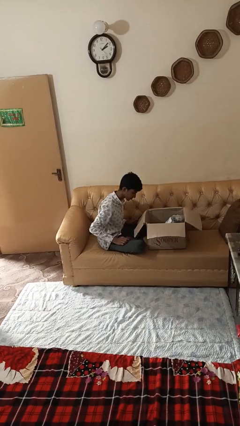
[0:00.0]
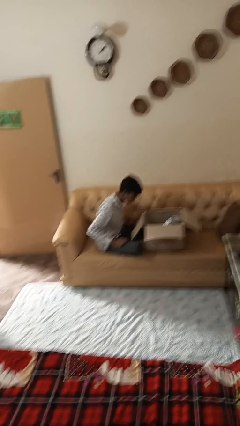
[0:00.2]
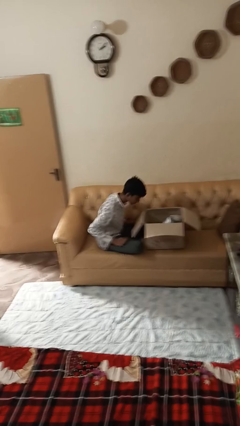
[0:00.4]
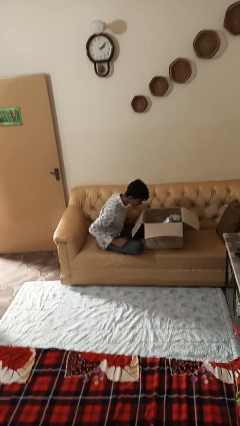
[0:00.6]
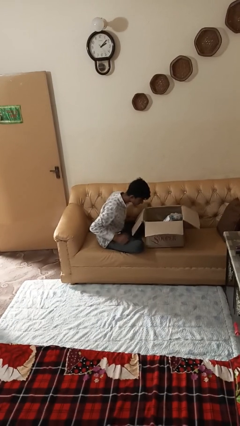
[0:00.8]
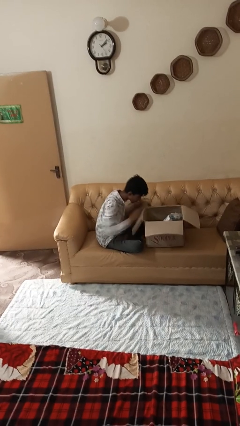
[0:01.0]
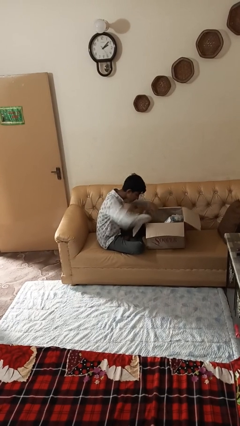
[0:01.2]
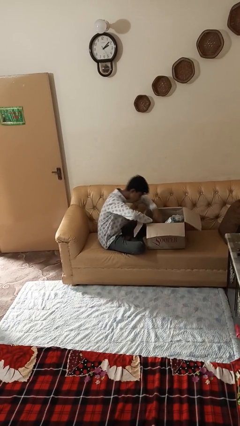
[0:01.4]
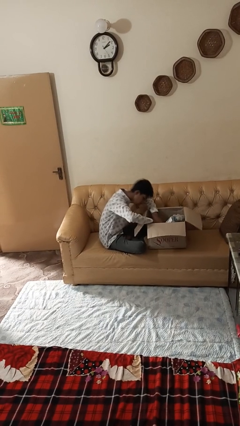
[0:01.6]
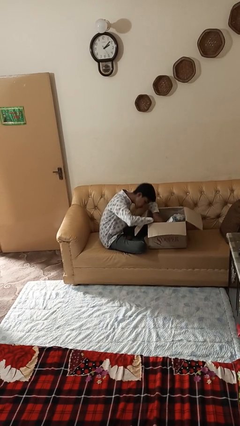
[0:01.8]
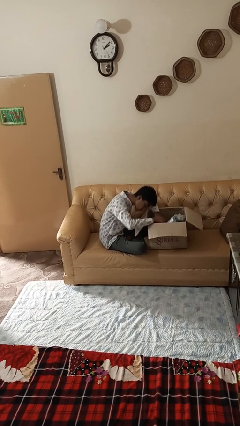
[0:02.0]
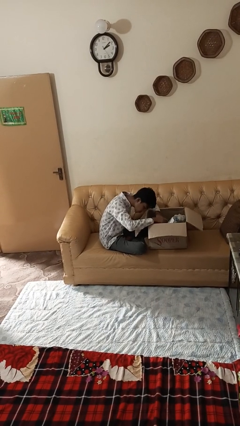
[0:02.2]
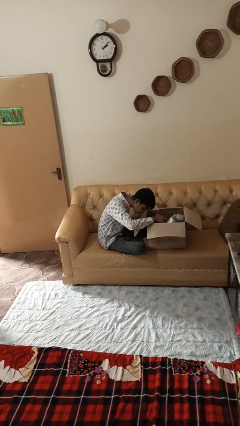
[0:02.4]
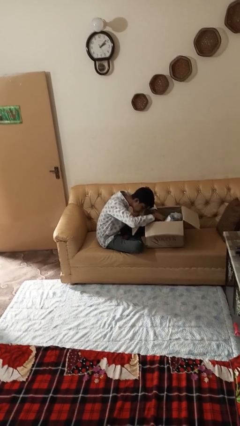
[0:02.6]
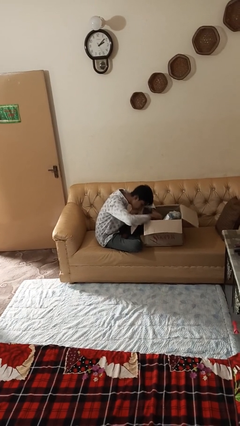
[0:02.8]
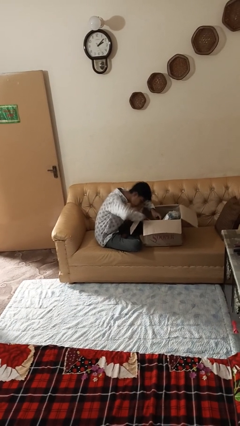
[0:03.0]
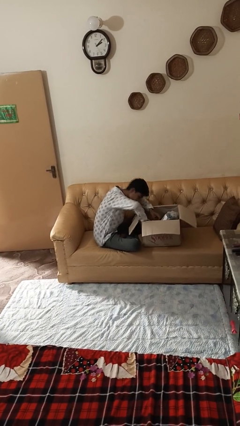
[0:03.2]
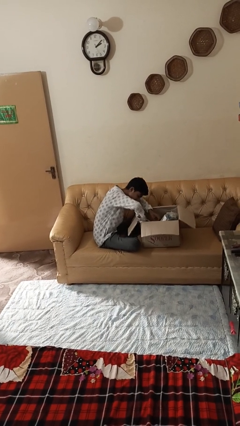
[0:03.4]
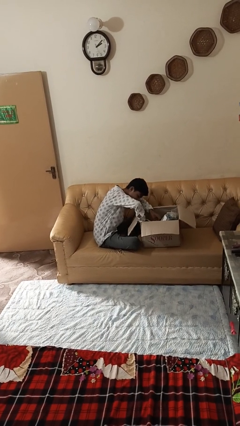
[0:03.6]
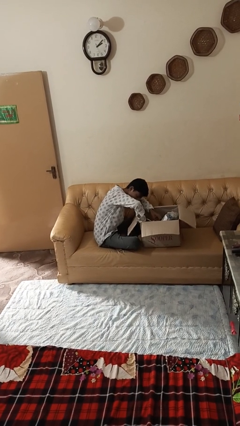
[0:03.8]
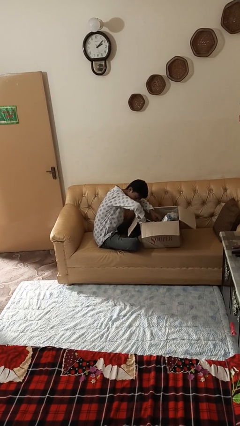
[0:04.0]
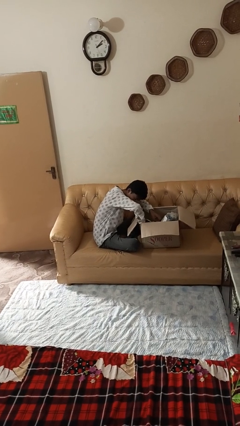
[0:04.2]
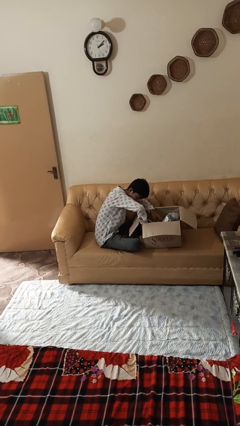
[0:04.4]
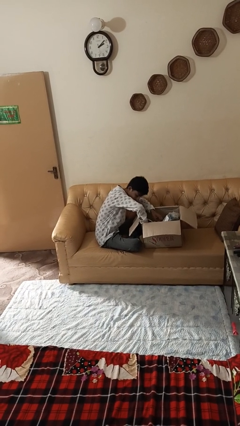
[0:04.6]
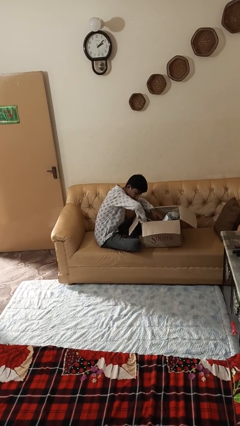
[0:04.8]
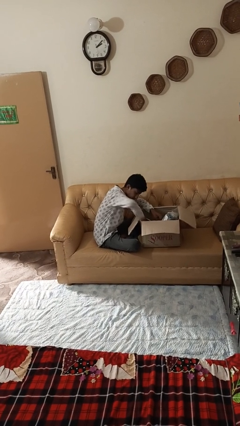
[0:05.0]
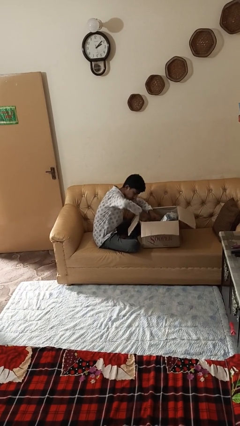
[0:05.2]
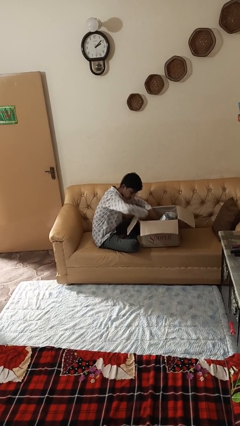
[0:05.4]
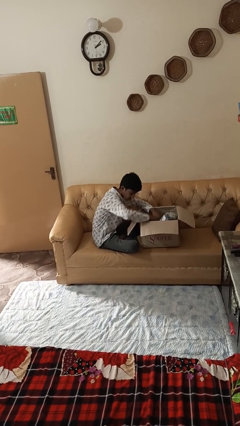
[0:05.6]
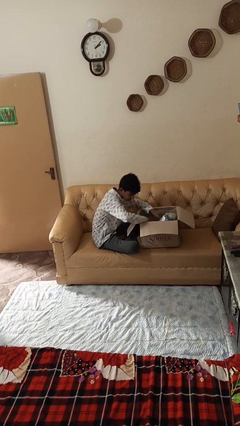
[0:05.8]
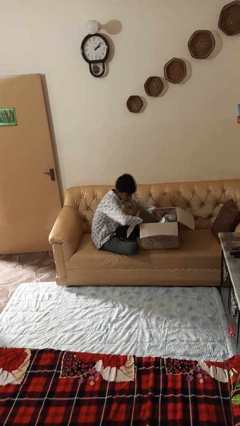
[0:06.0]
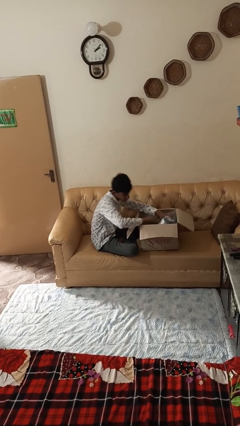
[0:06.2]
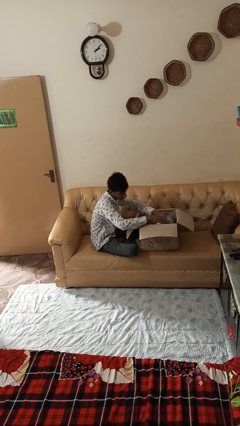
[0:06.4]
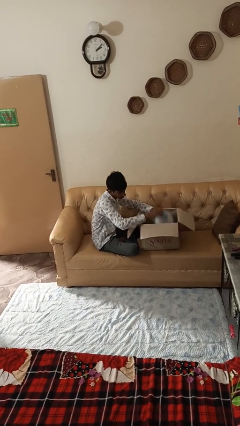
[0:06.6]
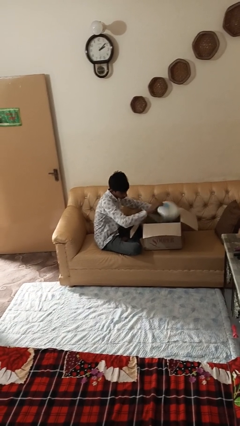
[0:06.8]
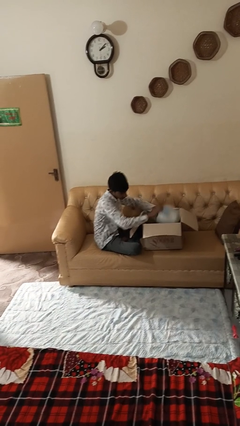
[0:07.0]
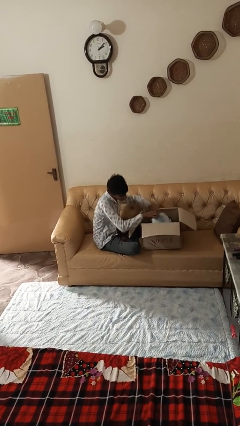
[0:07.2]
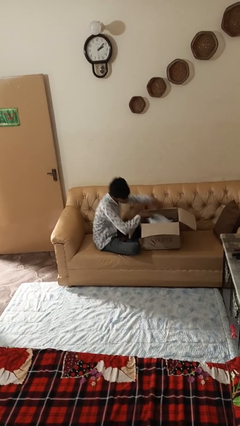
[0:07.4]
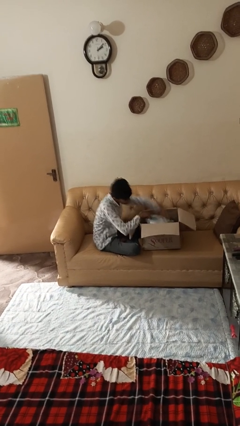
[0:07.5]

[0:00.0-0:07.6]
person searches in box

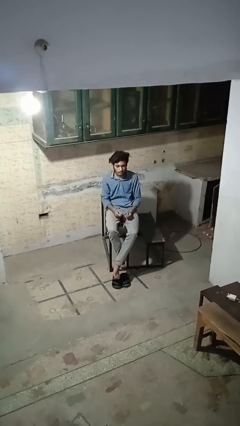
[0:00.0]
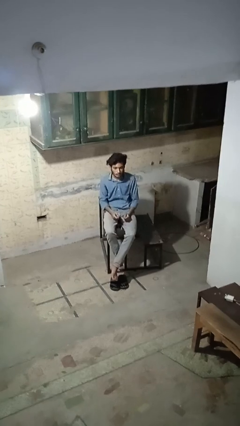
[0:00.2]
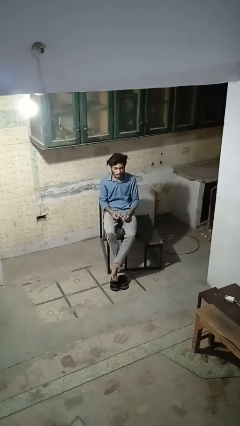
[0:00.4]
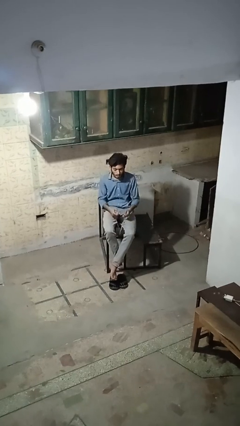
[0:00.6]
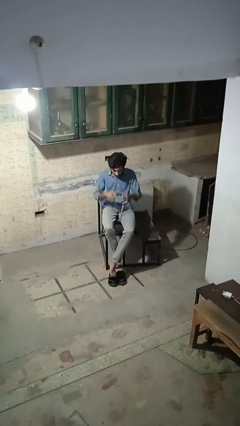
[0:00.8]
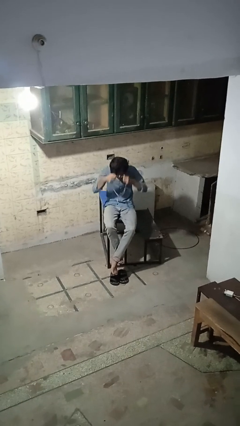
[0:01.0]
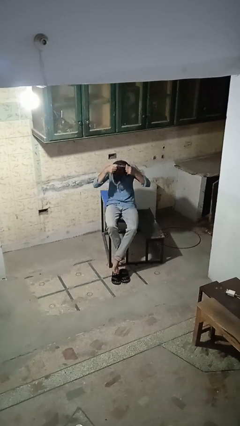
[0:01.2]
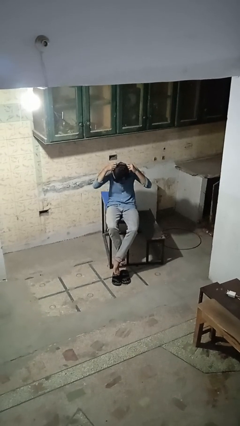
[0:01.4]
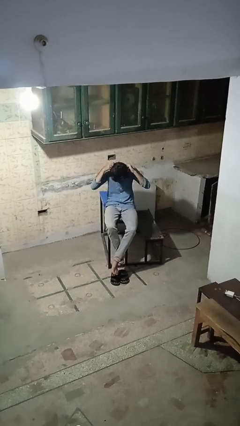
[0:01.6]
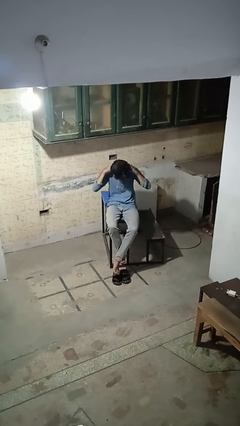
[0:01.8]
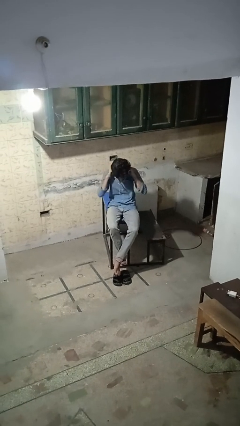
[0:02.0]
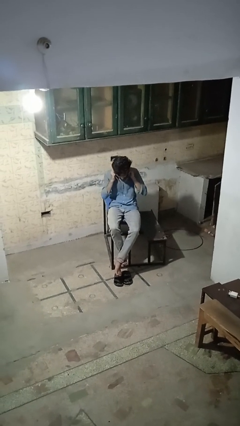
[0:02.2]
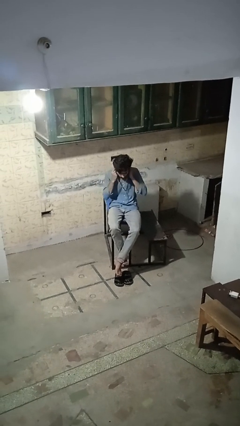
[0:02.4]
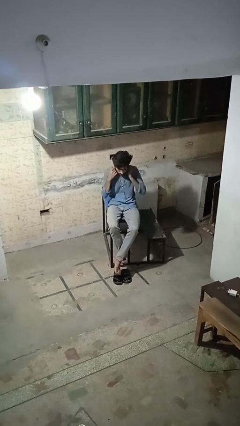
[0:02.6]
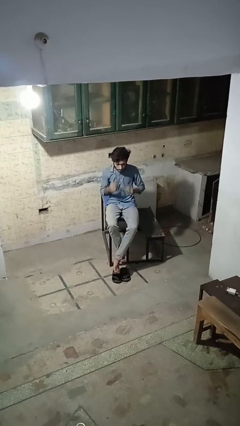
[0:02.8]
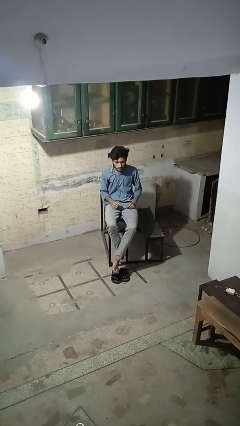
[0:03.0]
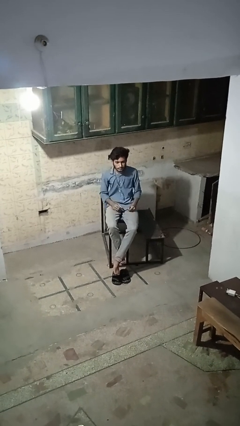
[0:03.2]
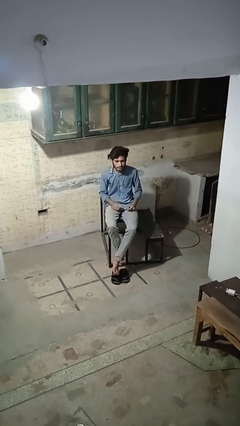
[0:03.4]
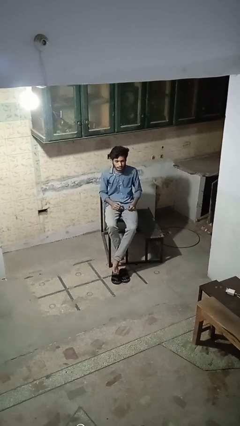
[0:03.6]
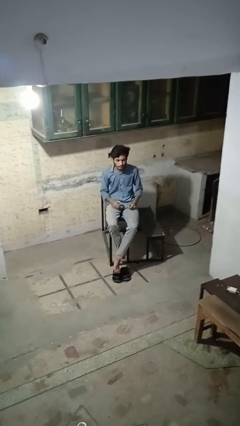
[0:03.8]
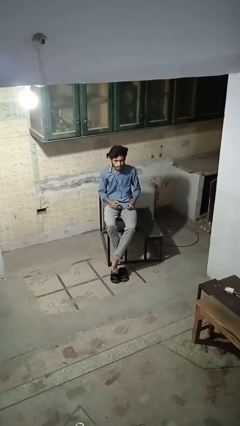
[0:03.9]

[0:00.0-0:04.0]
person puts on necklace

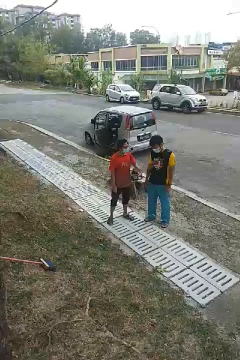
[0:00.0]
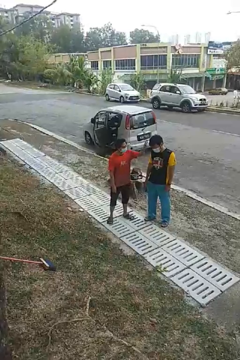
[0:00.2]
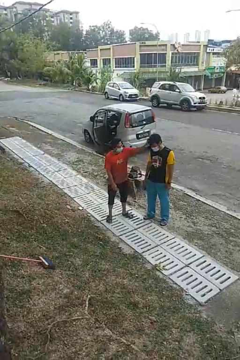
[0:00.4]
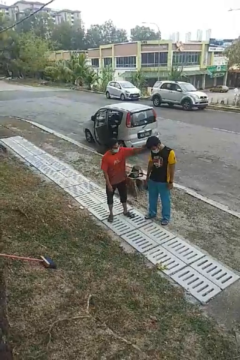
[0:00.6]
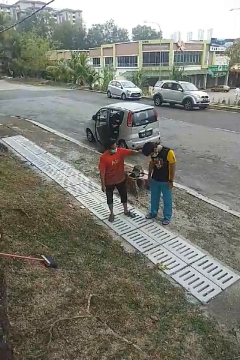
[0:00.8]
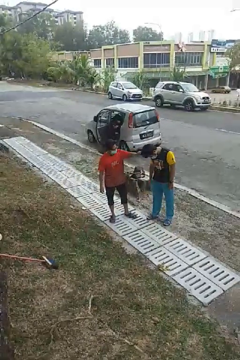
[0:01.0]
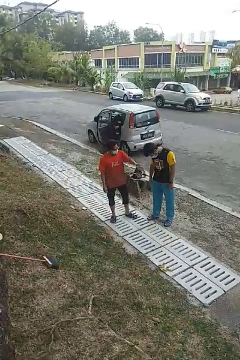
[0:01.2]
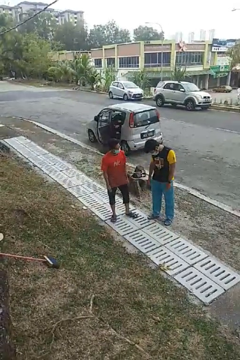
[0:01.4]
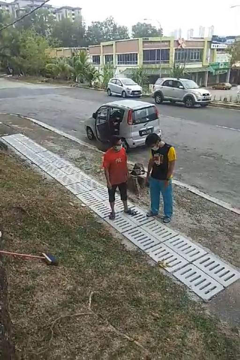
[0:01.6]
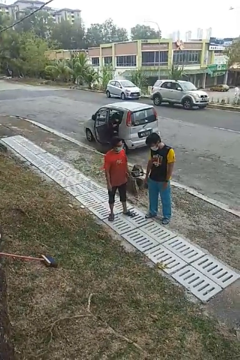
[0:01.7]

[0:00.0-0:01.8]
person grabs person by hair

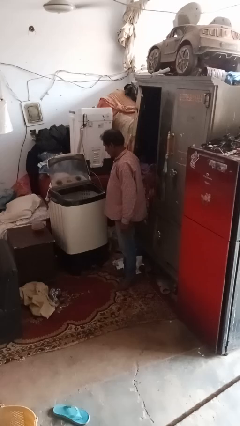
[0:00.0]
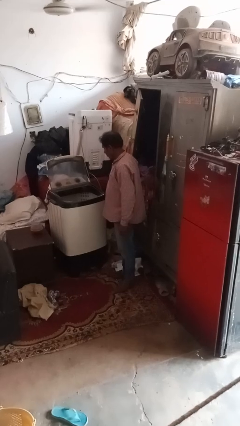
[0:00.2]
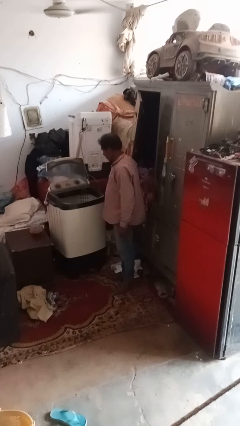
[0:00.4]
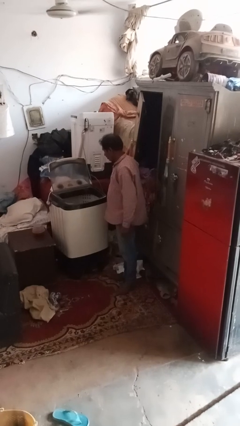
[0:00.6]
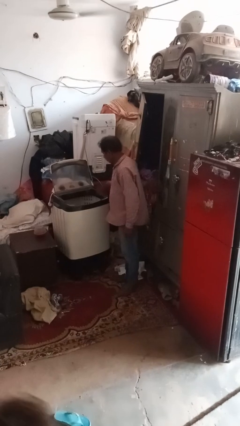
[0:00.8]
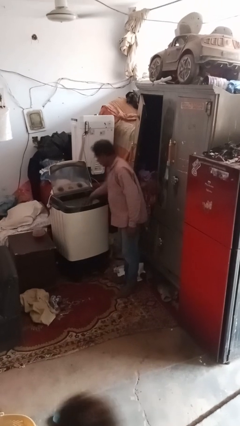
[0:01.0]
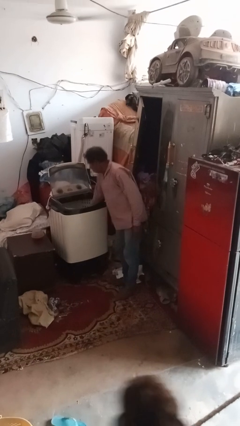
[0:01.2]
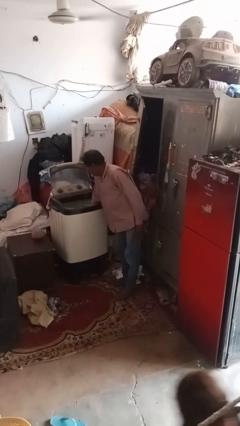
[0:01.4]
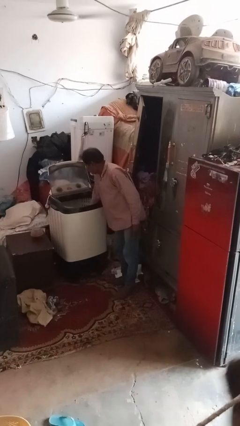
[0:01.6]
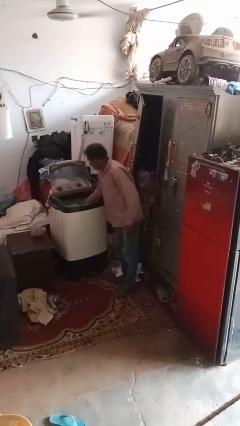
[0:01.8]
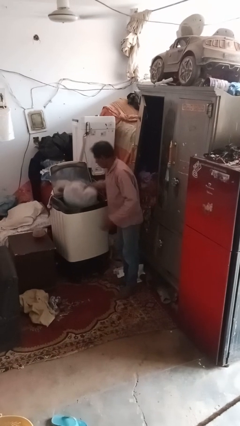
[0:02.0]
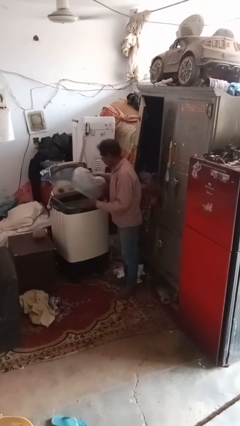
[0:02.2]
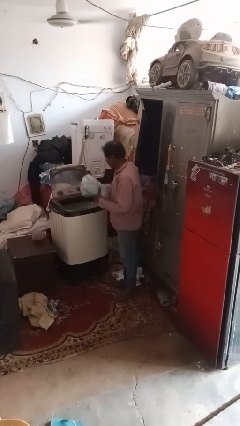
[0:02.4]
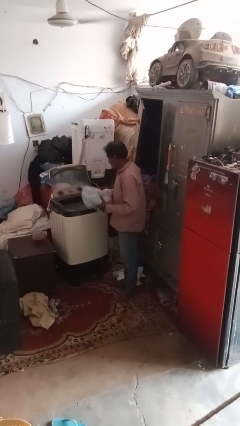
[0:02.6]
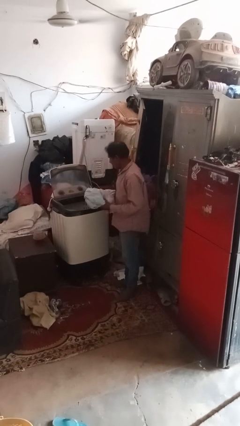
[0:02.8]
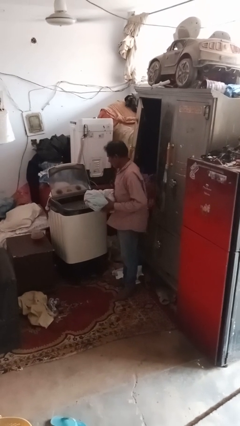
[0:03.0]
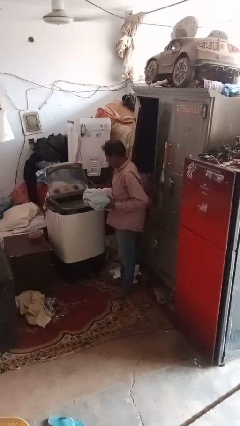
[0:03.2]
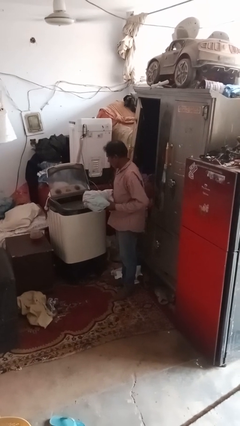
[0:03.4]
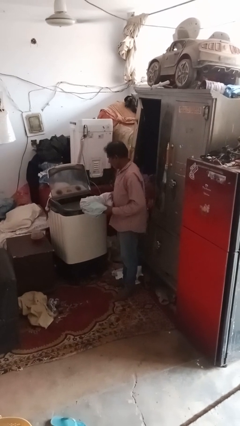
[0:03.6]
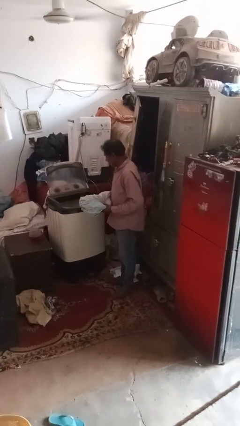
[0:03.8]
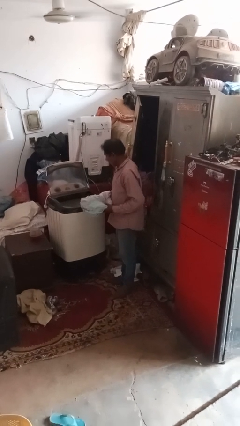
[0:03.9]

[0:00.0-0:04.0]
person unloads clotheswasher

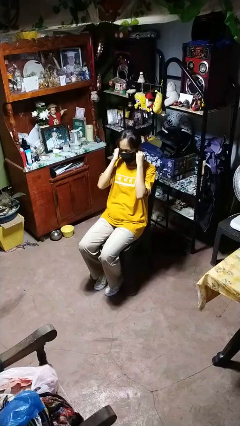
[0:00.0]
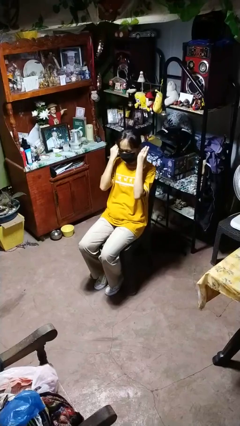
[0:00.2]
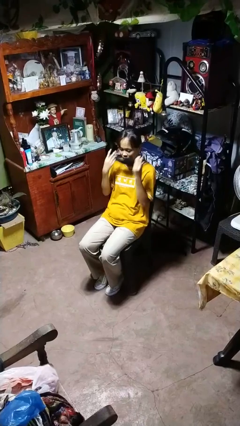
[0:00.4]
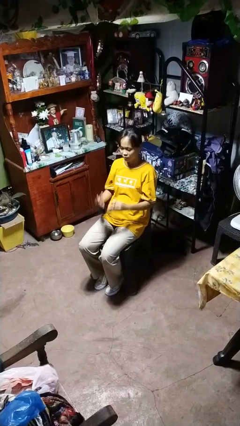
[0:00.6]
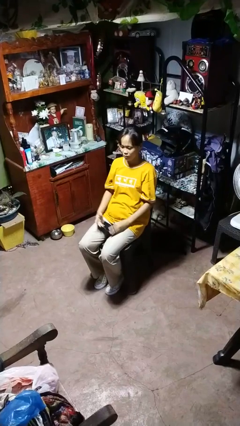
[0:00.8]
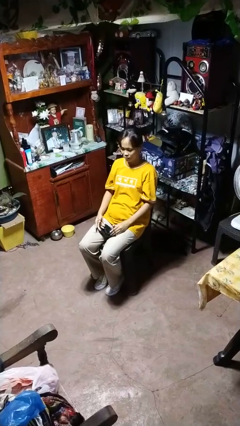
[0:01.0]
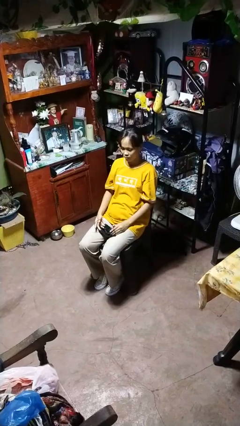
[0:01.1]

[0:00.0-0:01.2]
person takes off facemask
